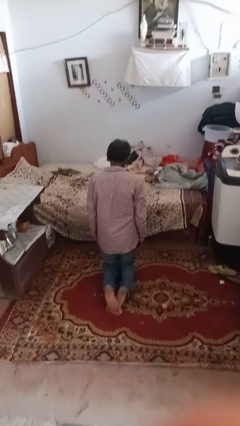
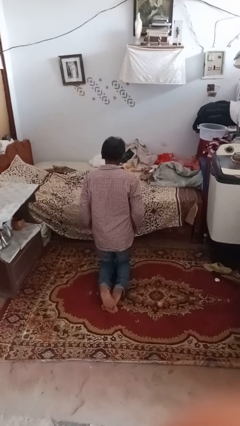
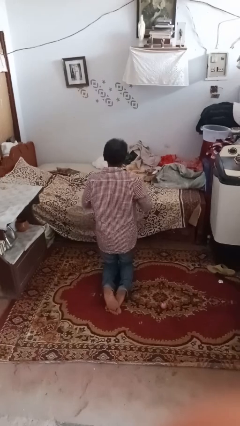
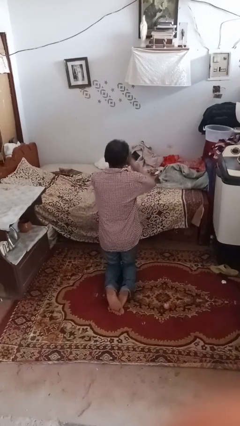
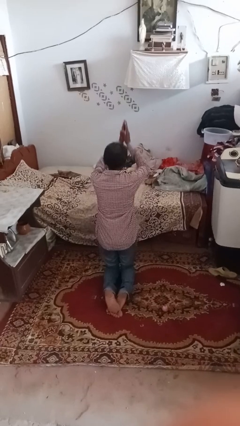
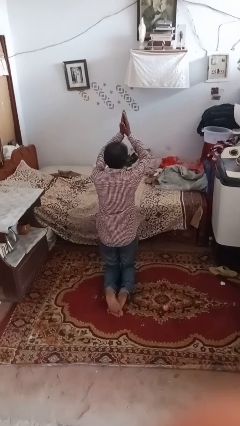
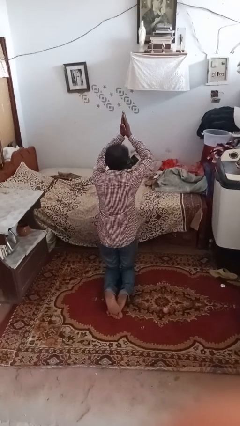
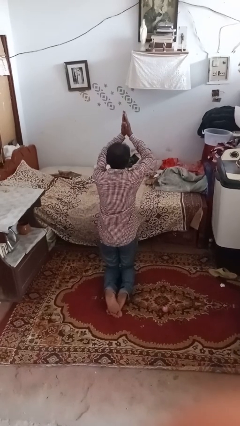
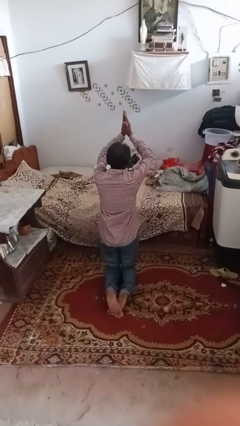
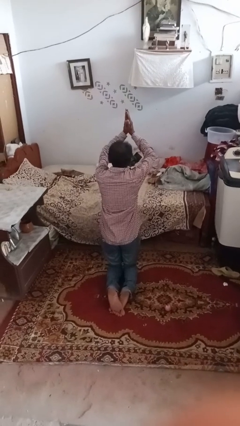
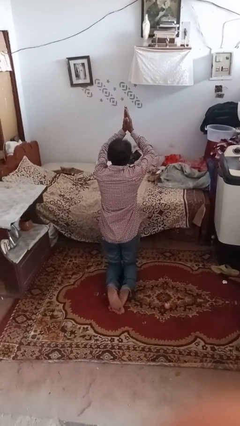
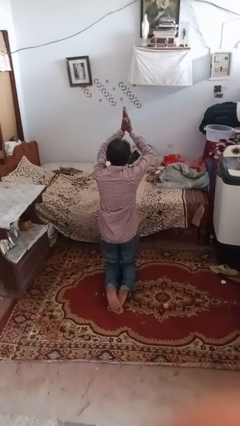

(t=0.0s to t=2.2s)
person prays

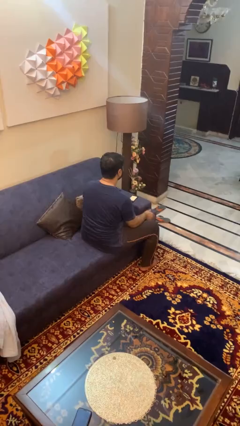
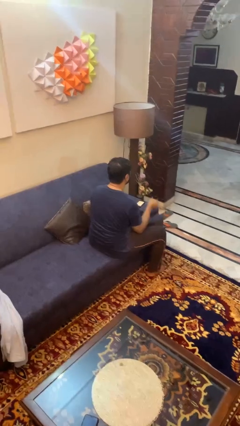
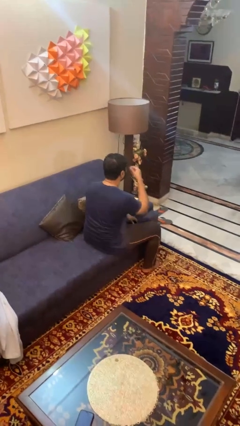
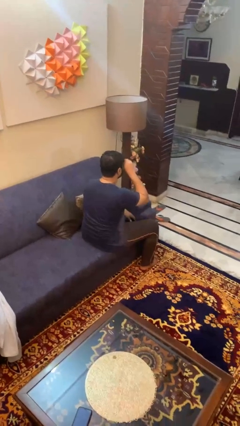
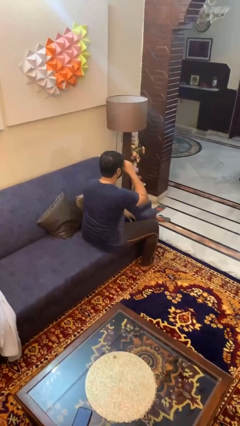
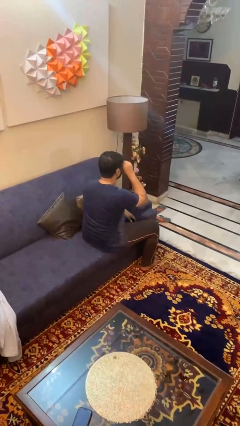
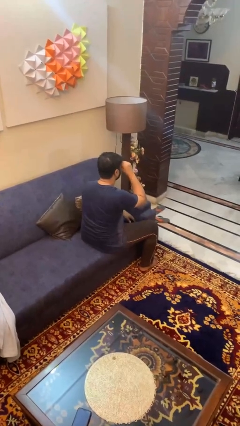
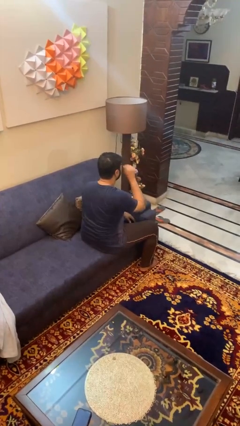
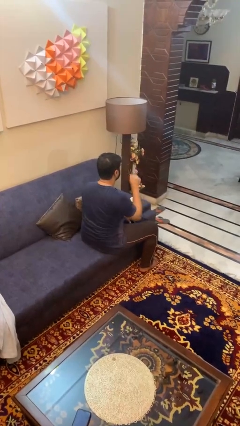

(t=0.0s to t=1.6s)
person rubs eyes

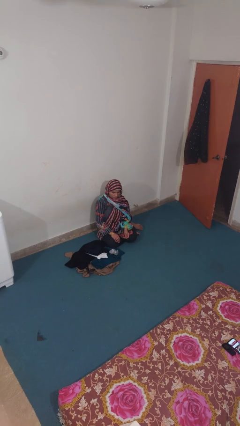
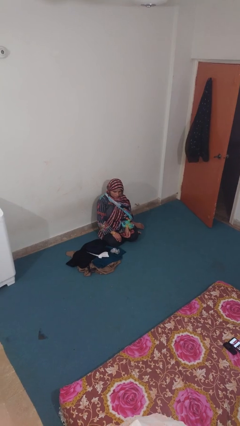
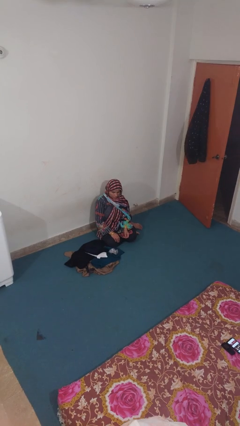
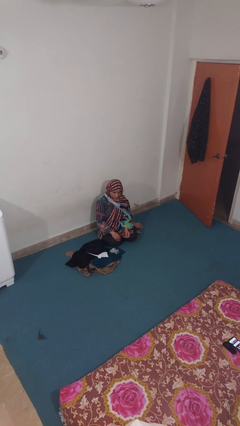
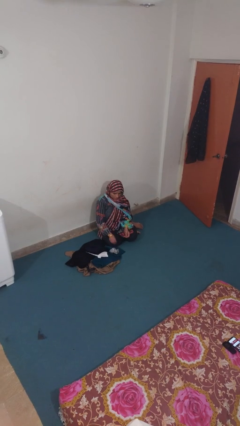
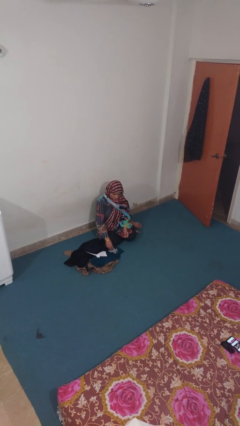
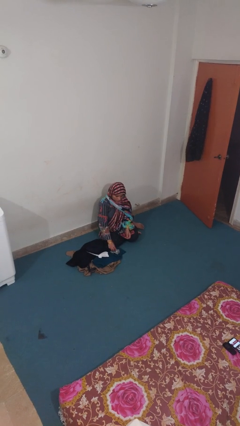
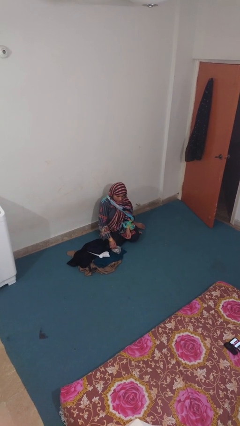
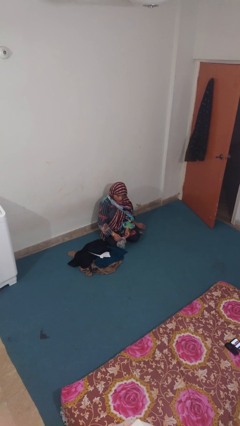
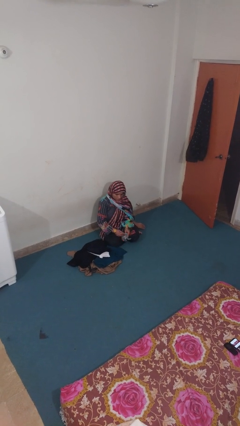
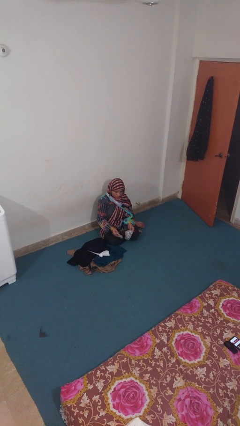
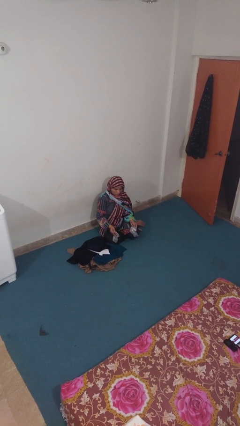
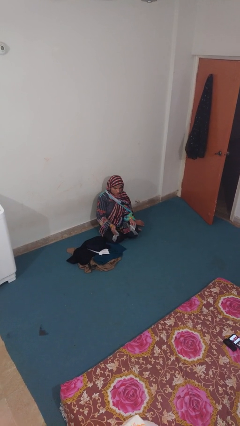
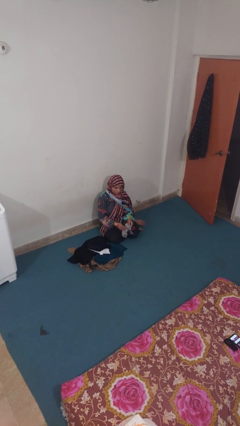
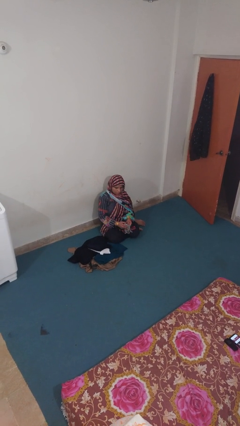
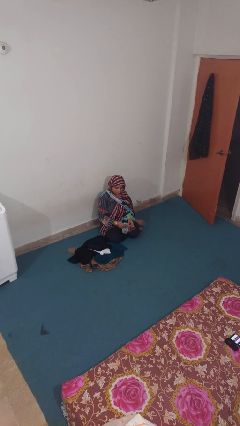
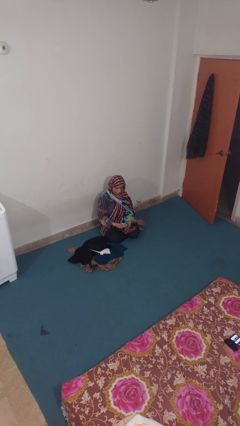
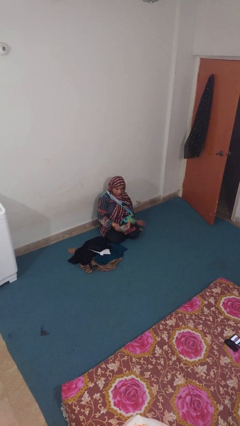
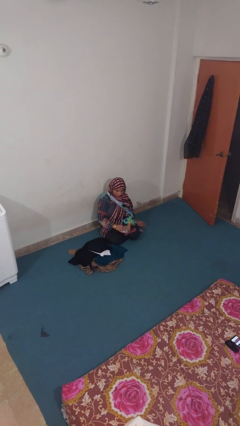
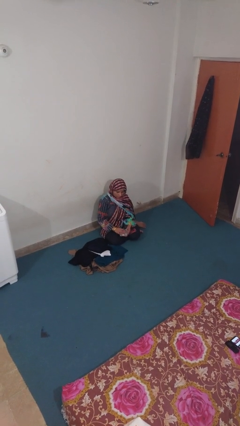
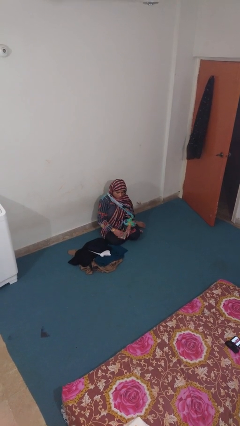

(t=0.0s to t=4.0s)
person folds socks

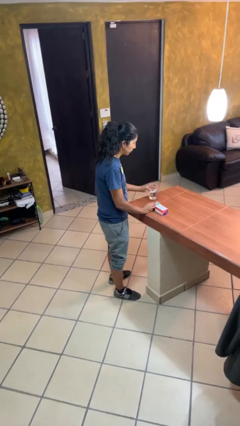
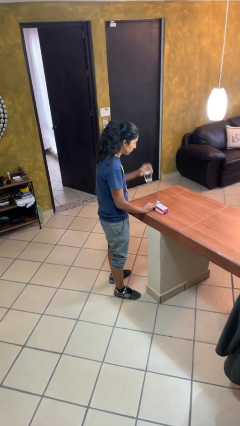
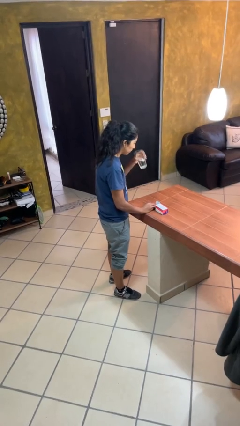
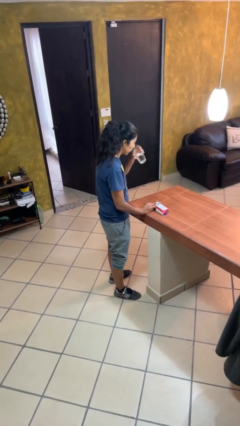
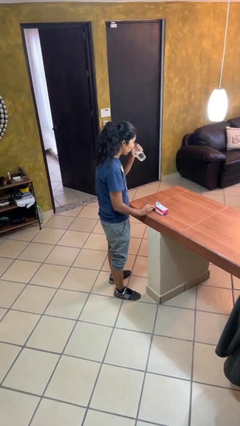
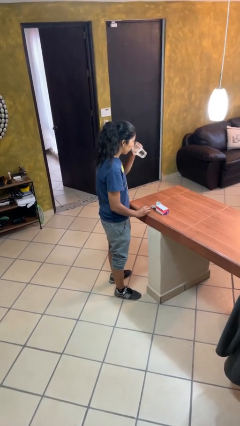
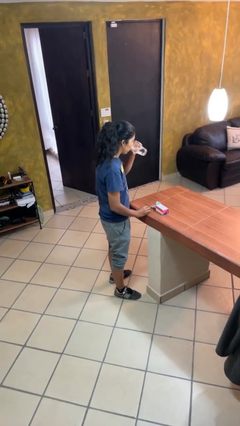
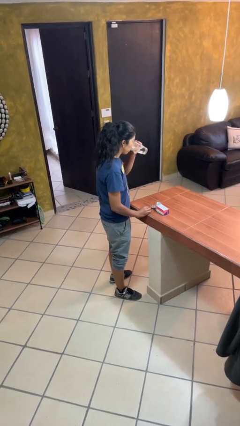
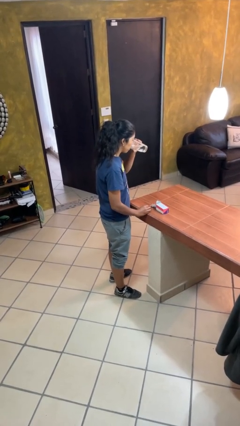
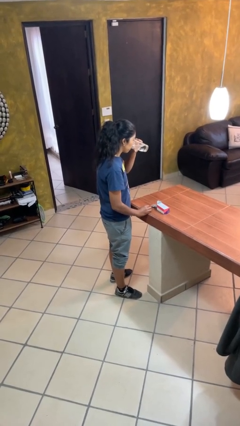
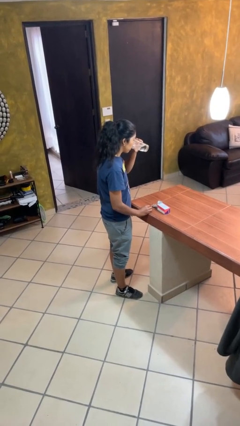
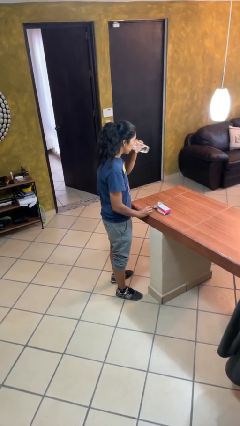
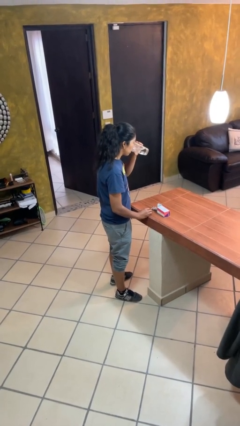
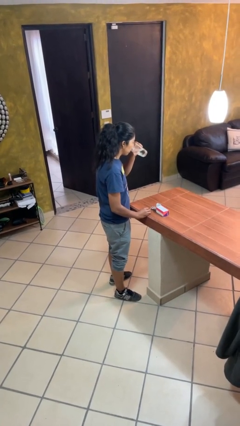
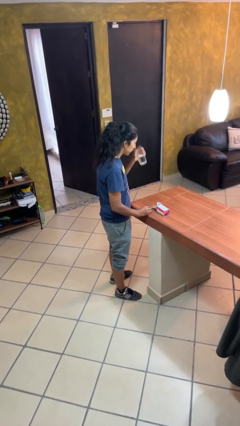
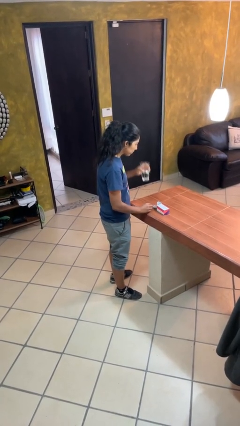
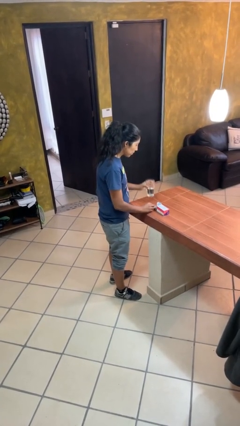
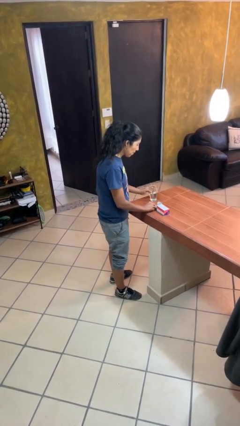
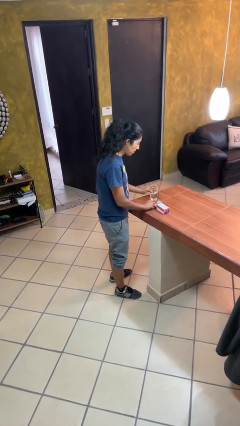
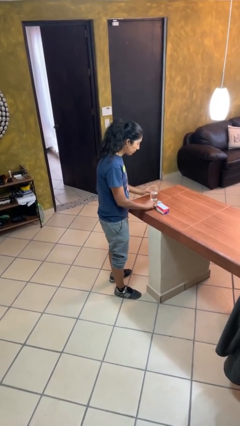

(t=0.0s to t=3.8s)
person drinks from cup

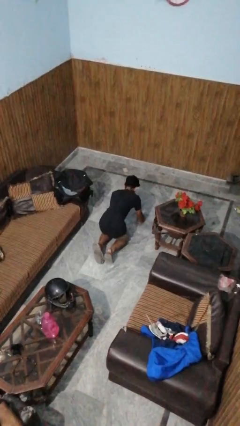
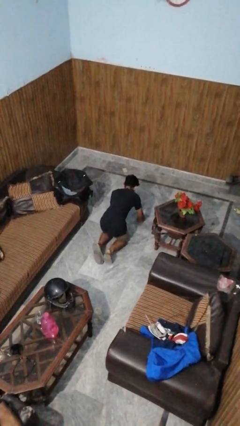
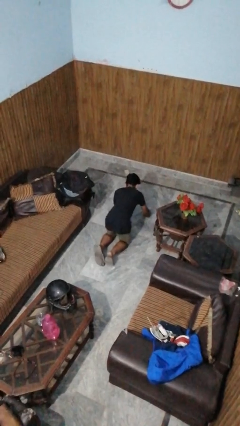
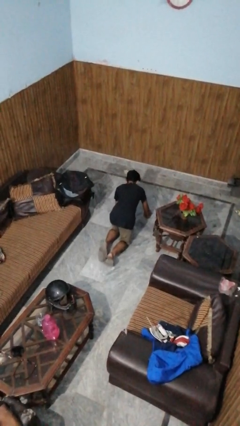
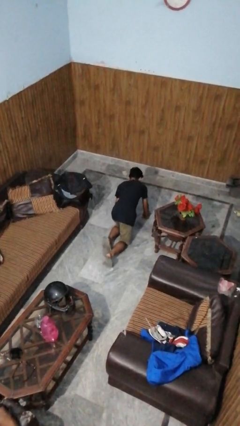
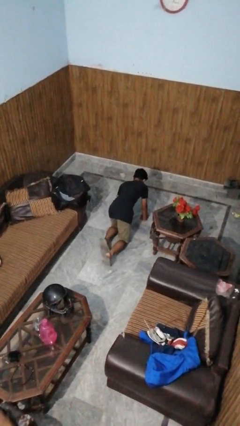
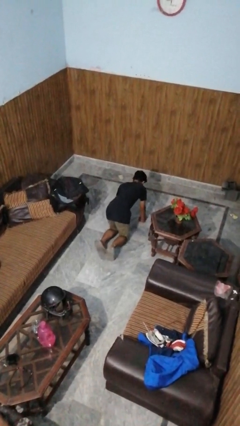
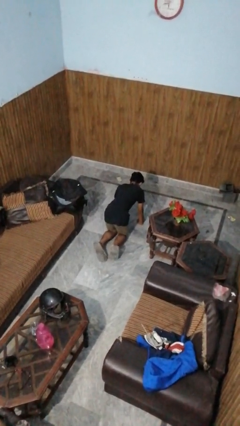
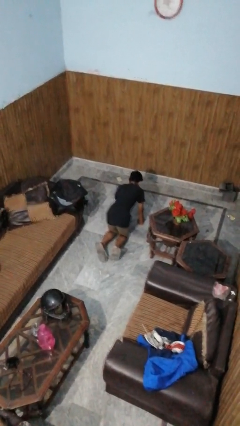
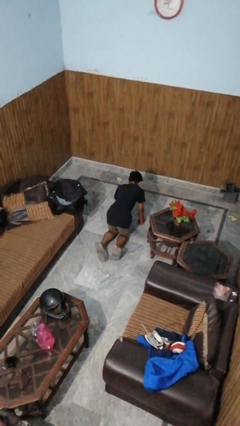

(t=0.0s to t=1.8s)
person crawls

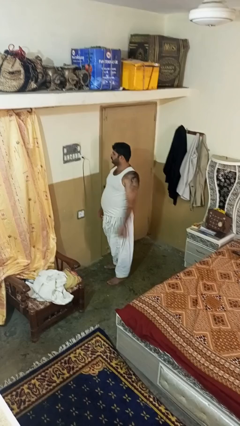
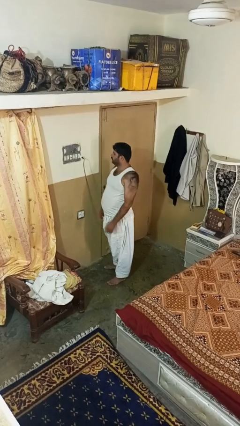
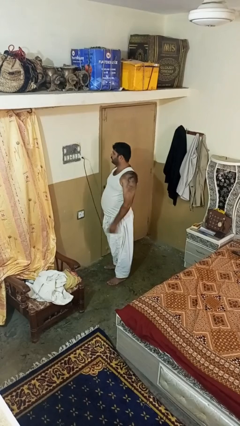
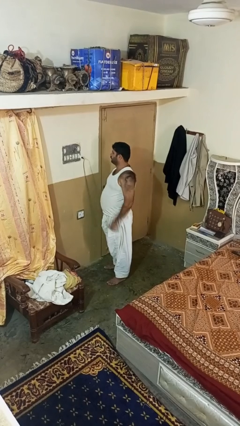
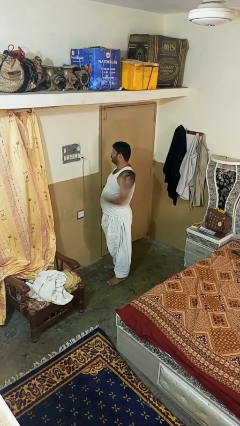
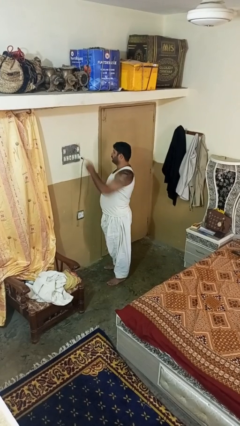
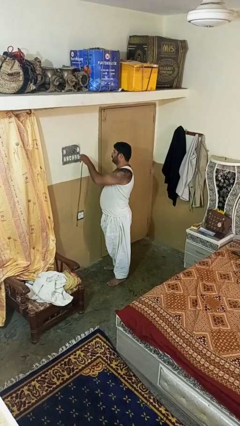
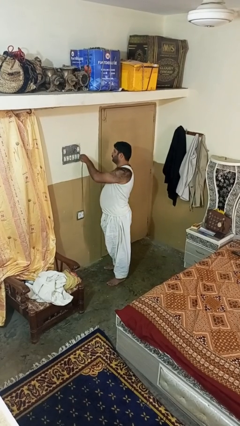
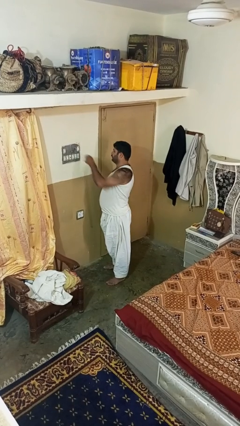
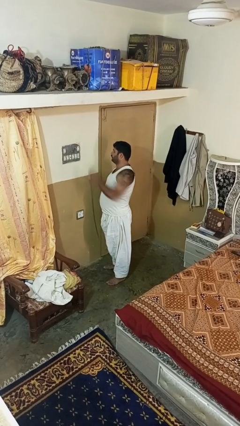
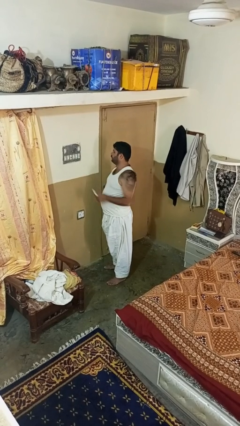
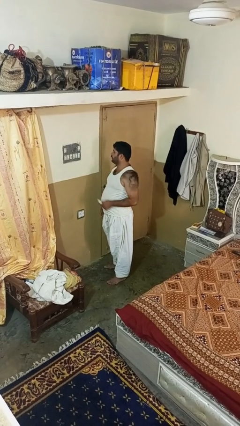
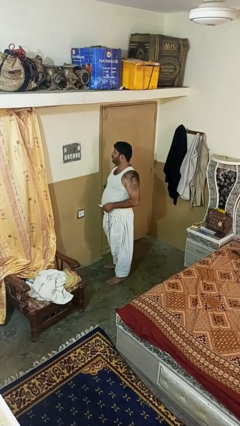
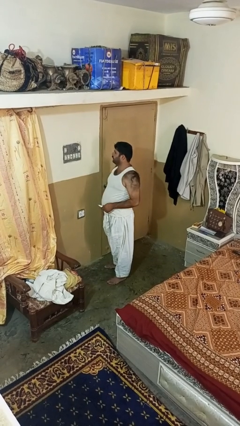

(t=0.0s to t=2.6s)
person unplugs from electrical socket

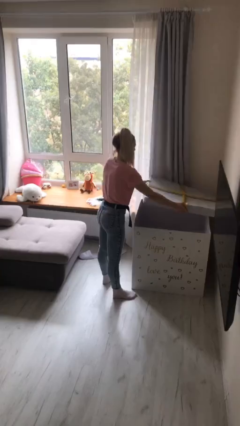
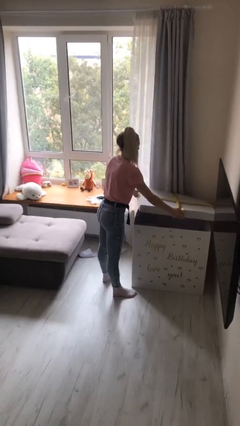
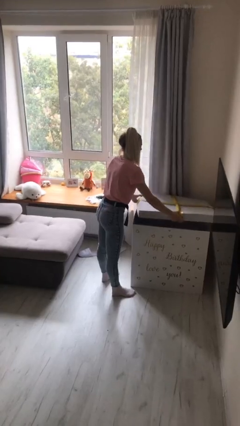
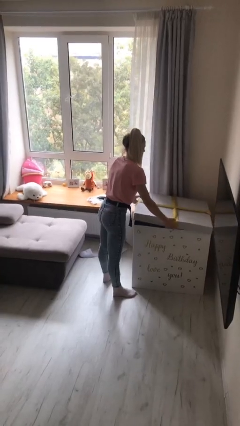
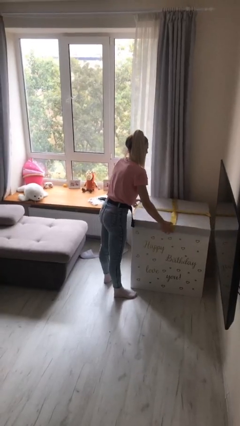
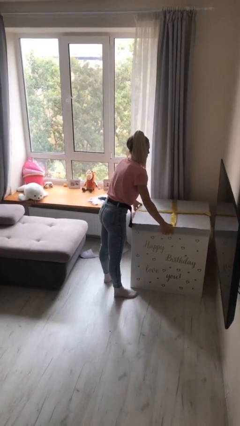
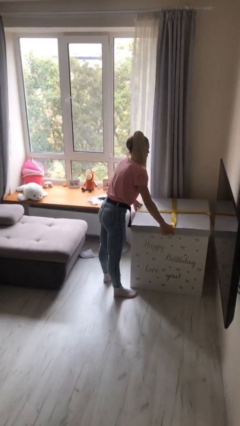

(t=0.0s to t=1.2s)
person closes box
